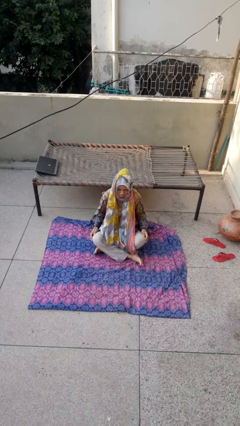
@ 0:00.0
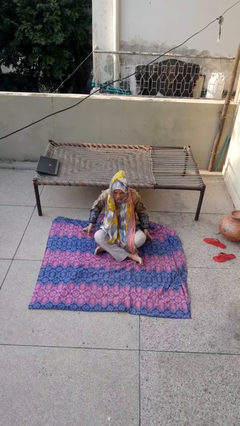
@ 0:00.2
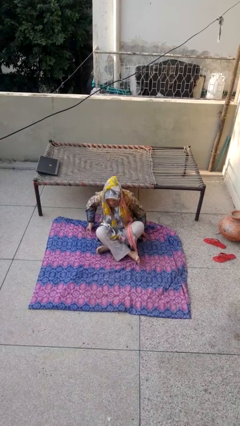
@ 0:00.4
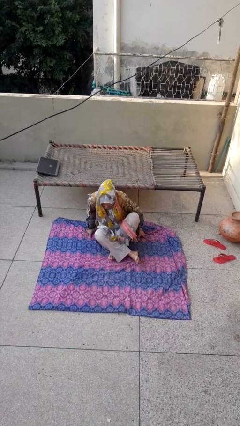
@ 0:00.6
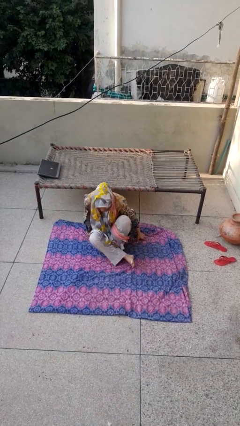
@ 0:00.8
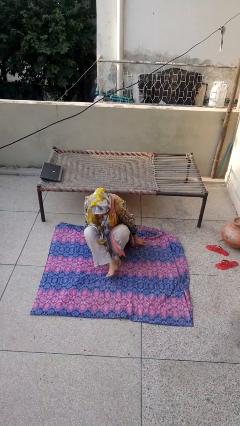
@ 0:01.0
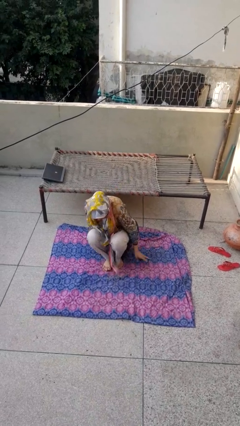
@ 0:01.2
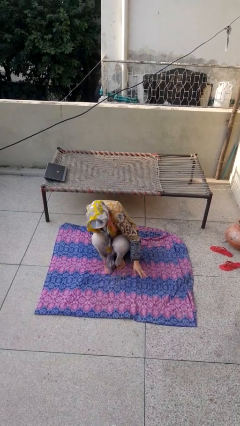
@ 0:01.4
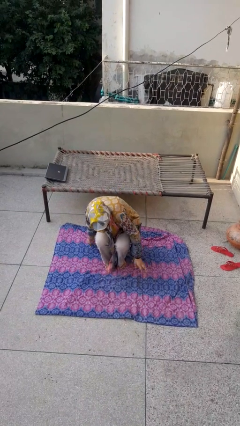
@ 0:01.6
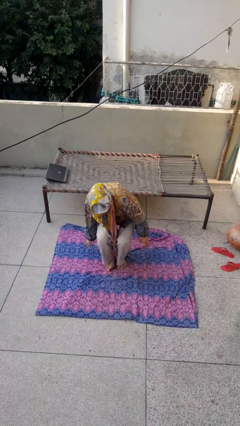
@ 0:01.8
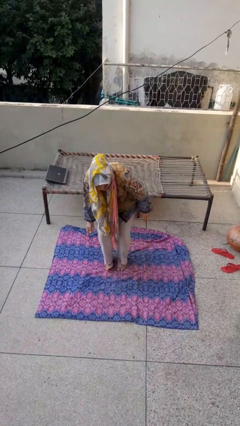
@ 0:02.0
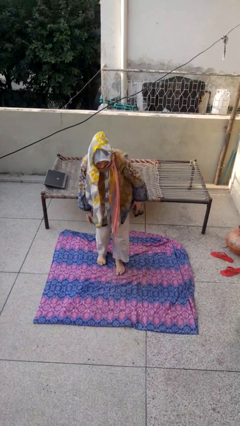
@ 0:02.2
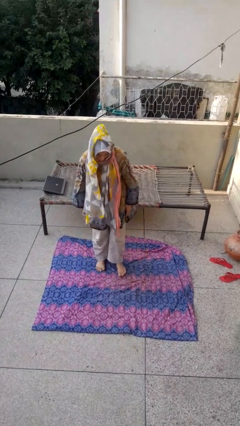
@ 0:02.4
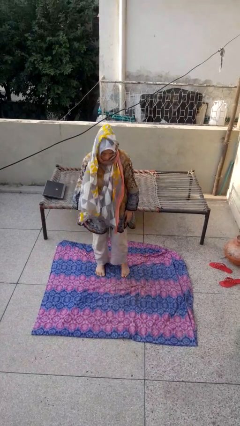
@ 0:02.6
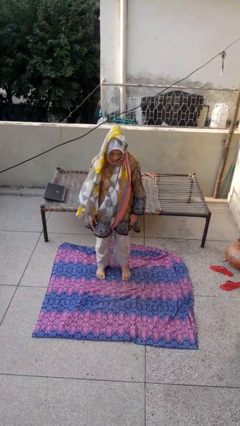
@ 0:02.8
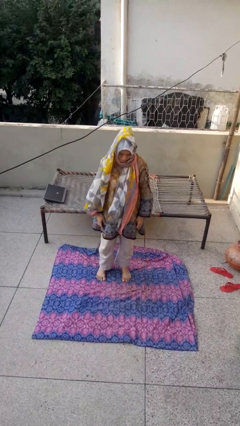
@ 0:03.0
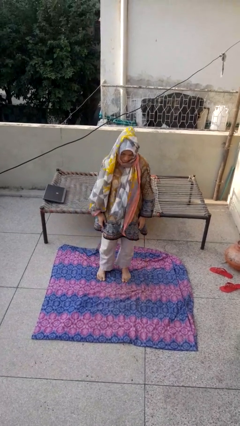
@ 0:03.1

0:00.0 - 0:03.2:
person stands up from floor

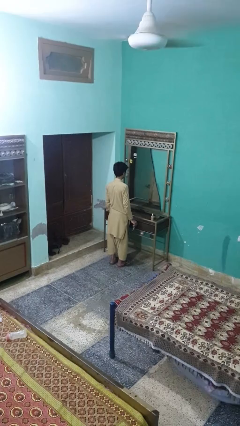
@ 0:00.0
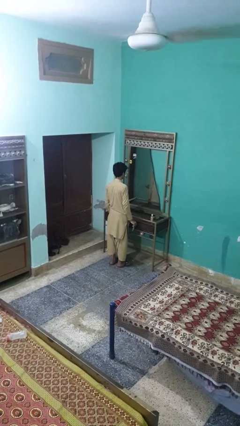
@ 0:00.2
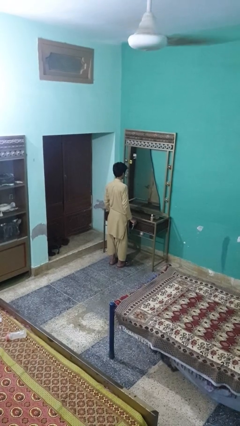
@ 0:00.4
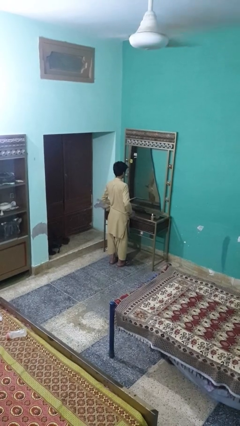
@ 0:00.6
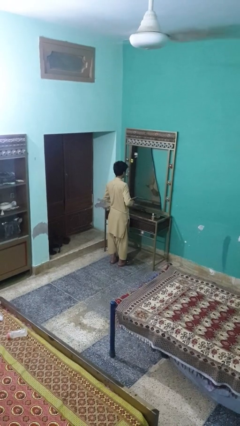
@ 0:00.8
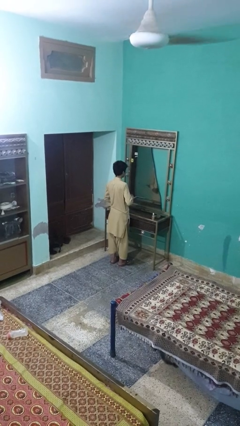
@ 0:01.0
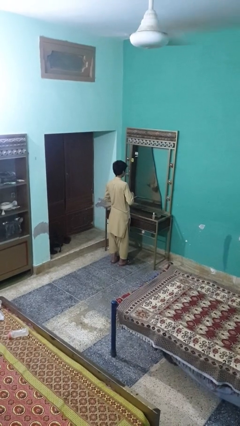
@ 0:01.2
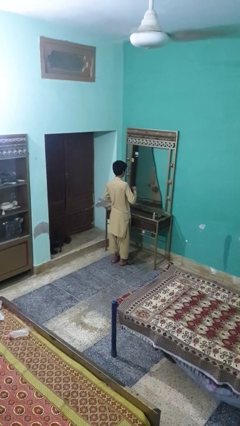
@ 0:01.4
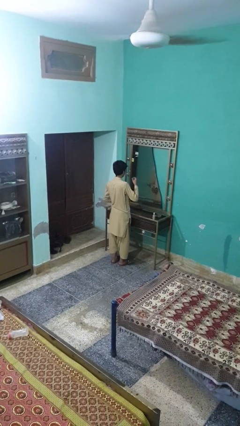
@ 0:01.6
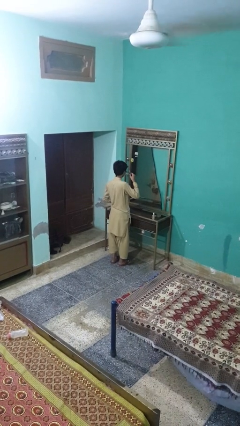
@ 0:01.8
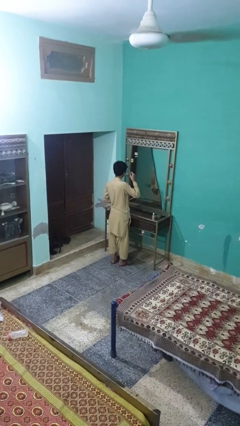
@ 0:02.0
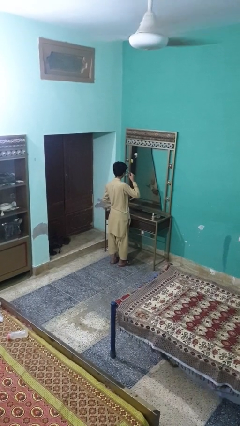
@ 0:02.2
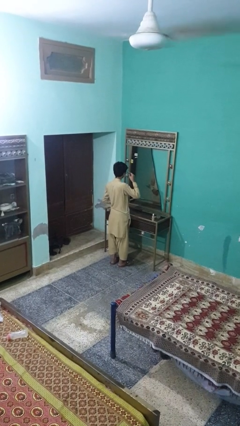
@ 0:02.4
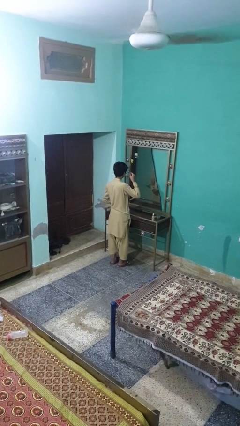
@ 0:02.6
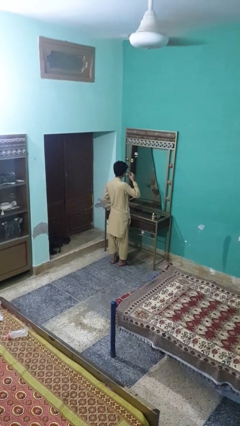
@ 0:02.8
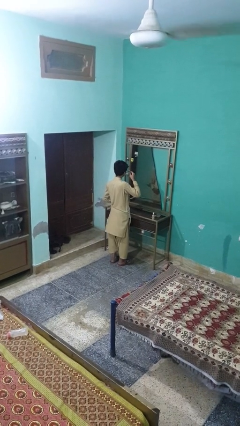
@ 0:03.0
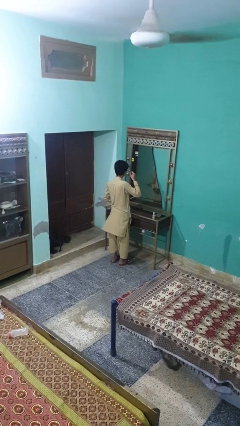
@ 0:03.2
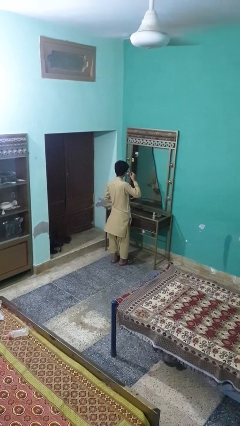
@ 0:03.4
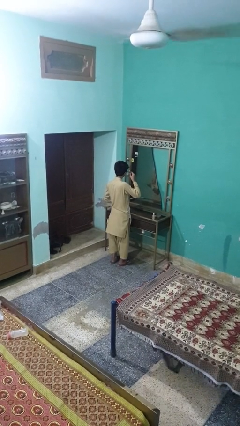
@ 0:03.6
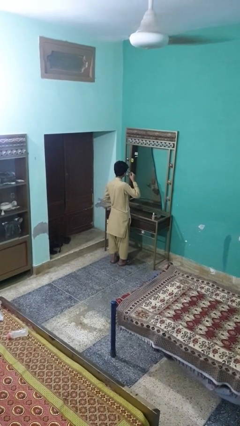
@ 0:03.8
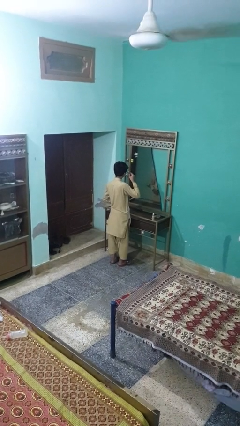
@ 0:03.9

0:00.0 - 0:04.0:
person applies eye makeup

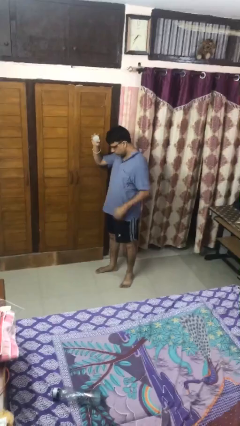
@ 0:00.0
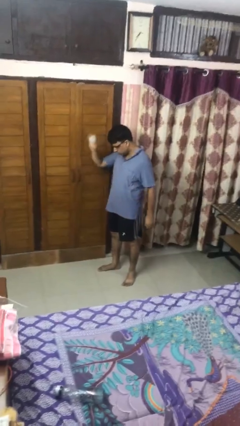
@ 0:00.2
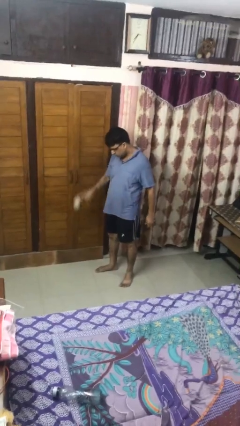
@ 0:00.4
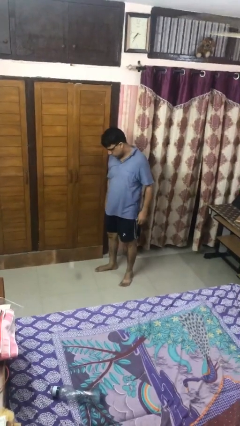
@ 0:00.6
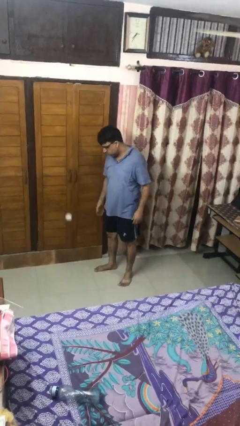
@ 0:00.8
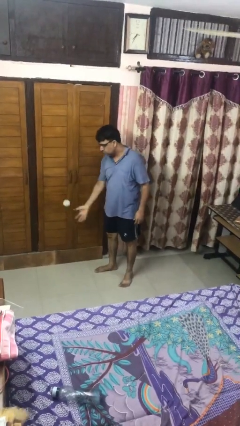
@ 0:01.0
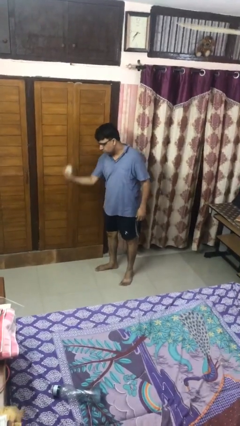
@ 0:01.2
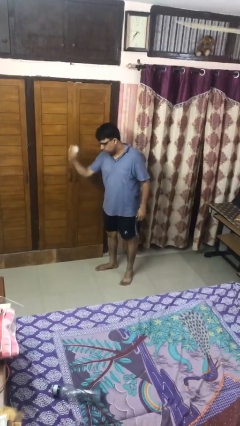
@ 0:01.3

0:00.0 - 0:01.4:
person bounces ball on floor

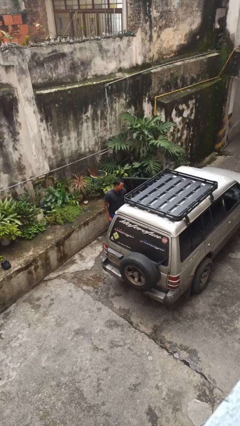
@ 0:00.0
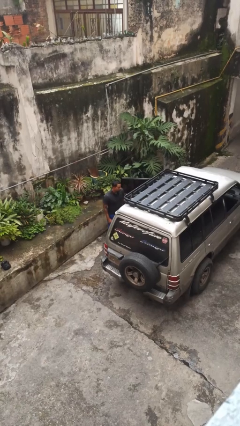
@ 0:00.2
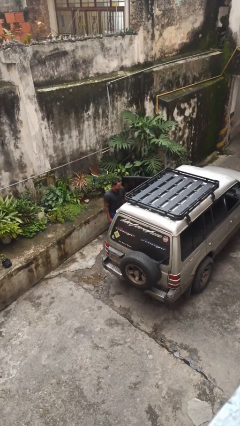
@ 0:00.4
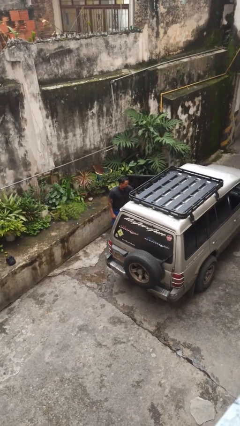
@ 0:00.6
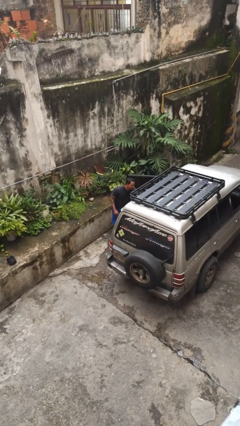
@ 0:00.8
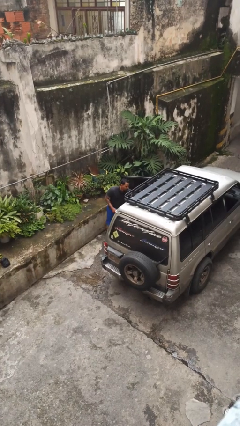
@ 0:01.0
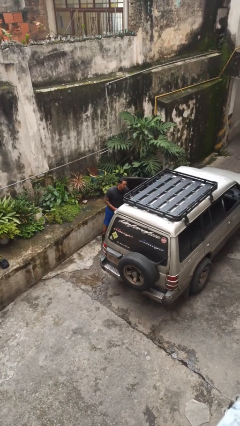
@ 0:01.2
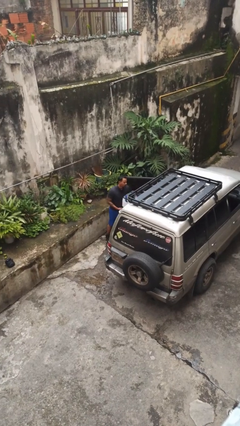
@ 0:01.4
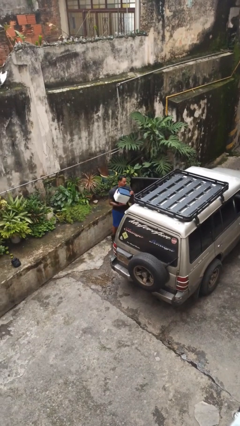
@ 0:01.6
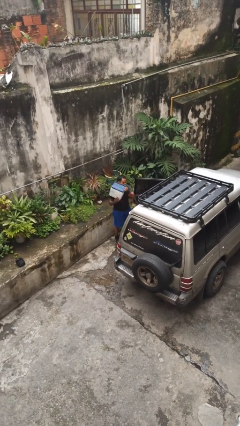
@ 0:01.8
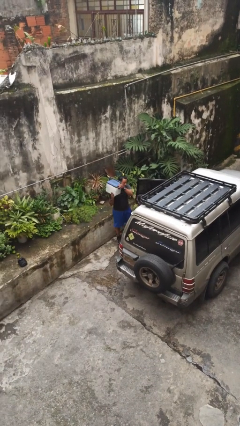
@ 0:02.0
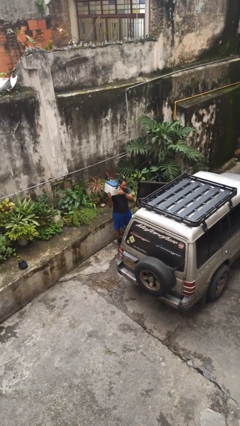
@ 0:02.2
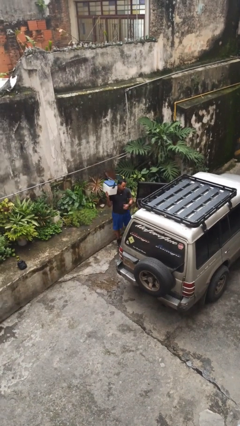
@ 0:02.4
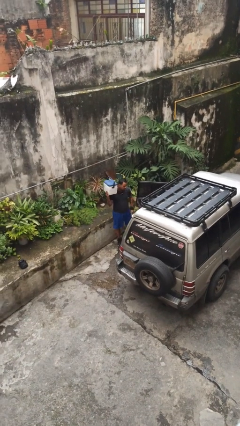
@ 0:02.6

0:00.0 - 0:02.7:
person unloads car

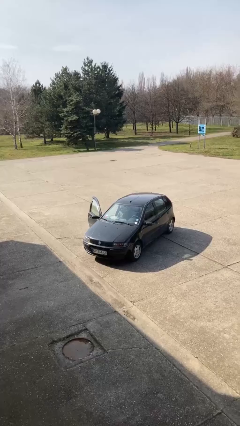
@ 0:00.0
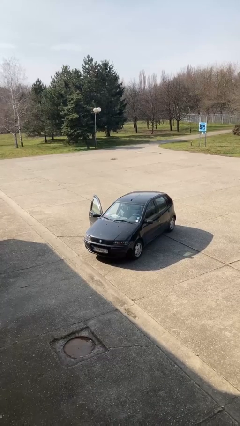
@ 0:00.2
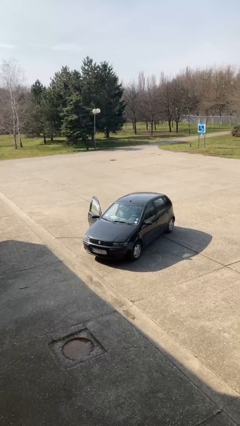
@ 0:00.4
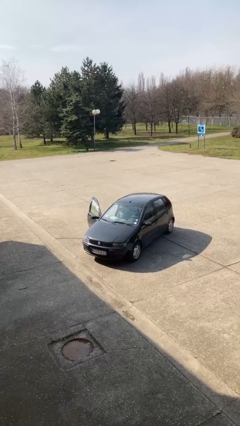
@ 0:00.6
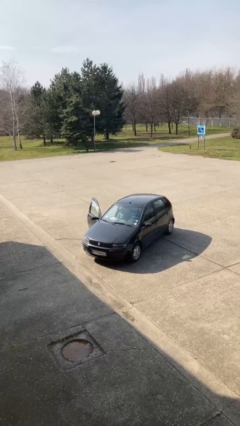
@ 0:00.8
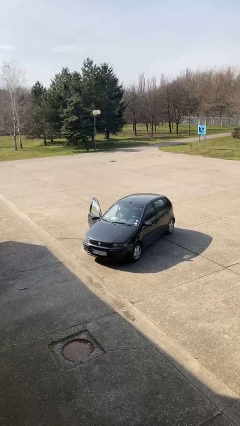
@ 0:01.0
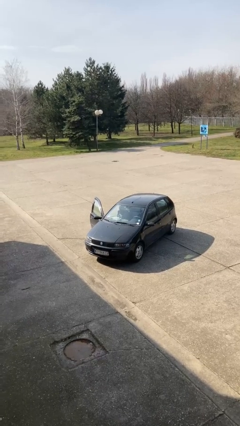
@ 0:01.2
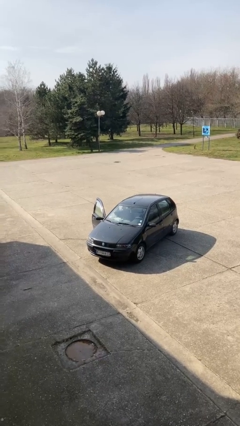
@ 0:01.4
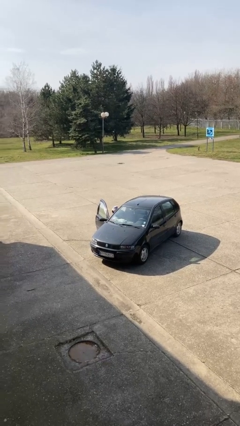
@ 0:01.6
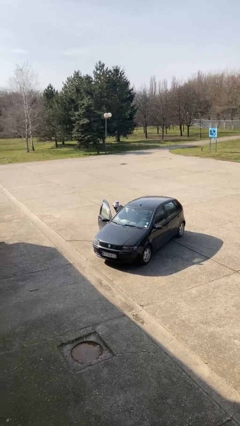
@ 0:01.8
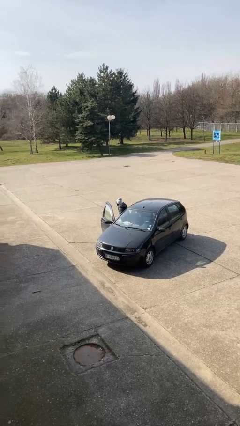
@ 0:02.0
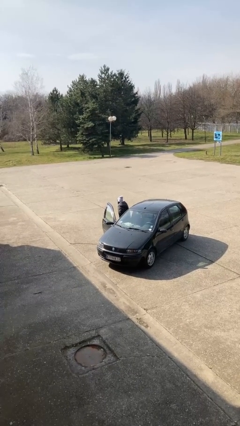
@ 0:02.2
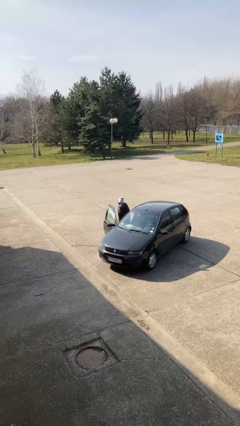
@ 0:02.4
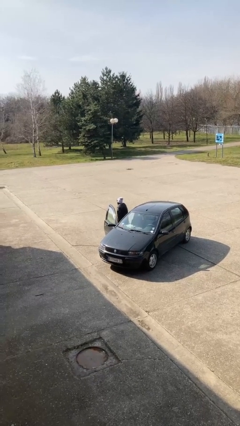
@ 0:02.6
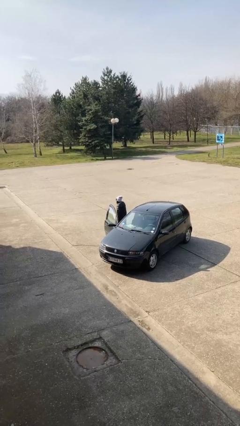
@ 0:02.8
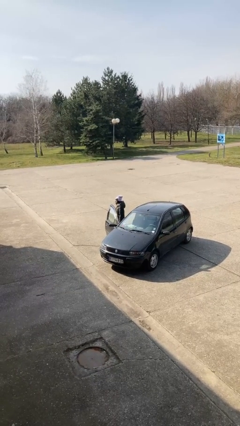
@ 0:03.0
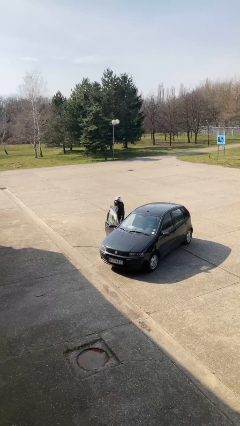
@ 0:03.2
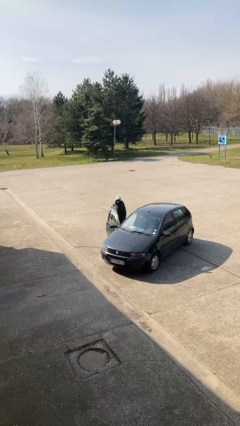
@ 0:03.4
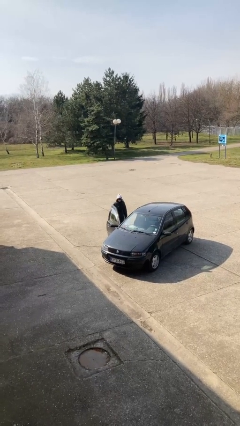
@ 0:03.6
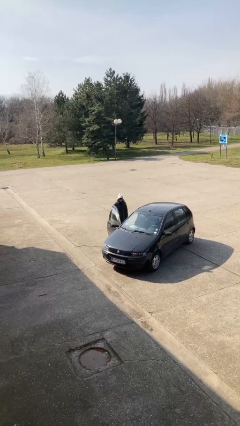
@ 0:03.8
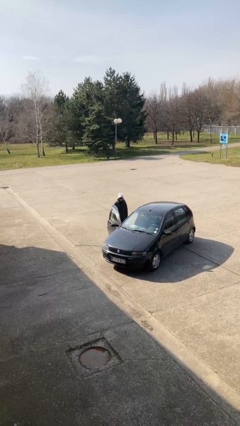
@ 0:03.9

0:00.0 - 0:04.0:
person exits car

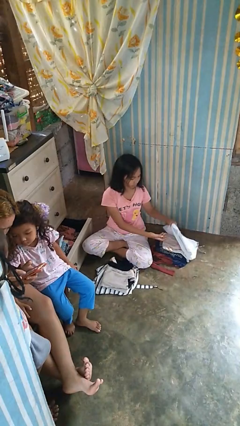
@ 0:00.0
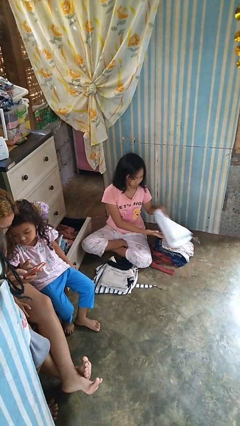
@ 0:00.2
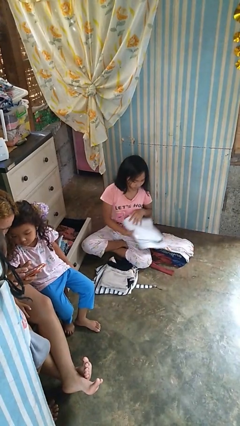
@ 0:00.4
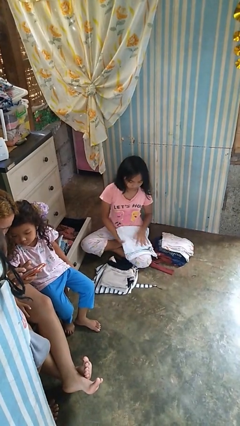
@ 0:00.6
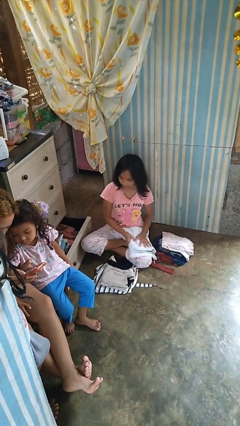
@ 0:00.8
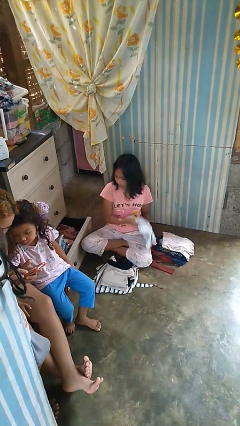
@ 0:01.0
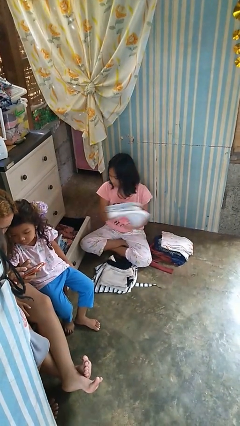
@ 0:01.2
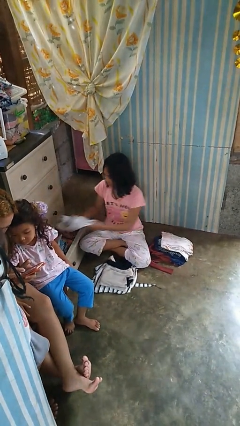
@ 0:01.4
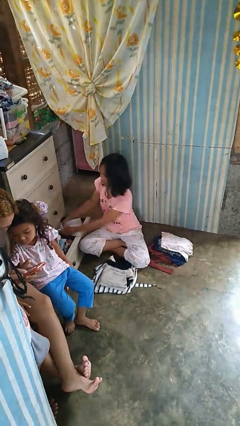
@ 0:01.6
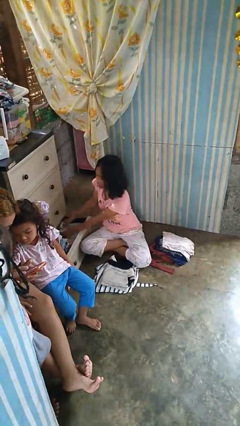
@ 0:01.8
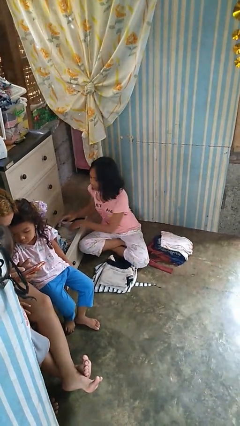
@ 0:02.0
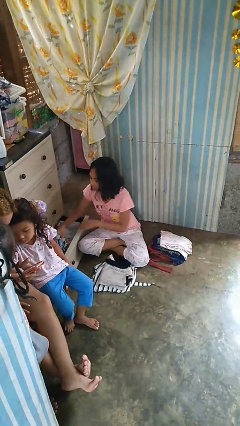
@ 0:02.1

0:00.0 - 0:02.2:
person puts clothes into dresser
